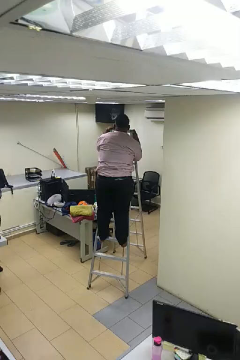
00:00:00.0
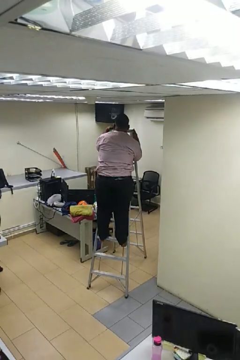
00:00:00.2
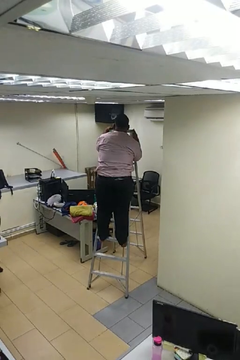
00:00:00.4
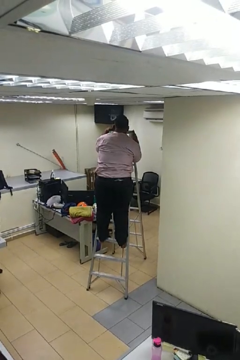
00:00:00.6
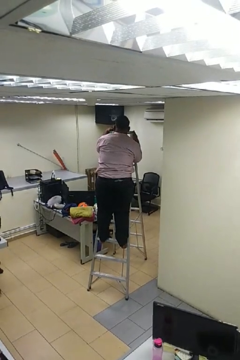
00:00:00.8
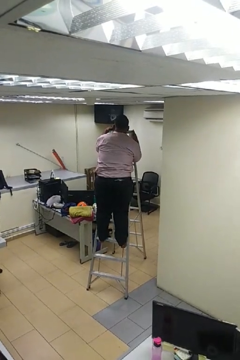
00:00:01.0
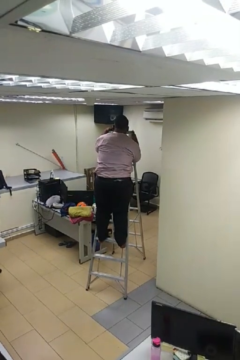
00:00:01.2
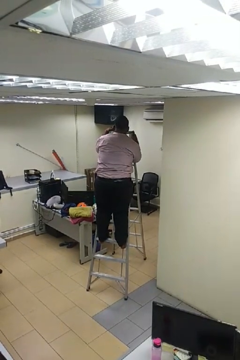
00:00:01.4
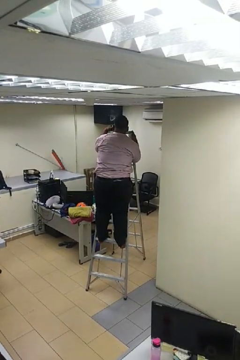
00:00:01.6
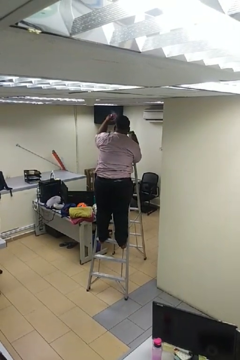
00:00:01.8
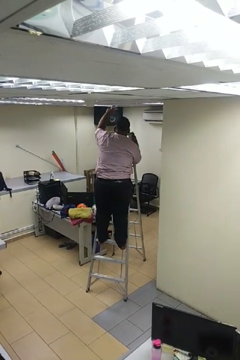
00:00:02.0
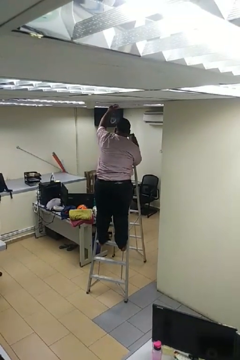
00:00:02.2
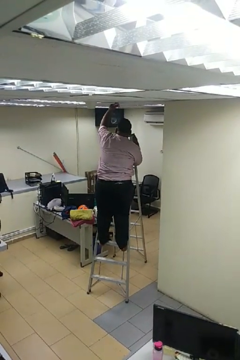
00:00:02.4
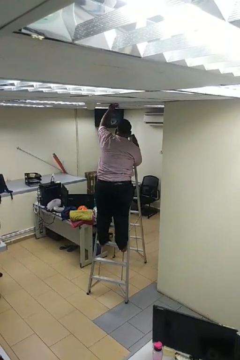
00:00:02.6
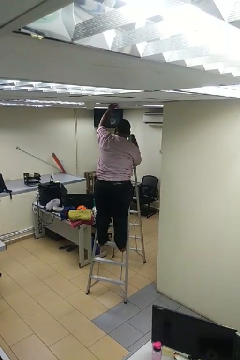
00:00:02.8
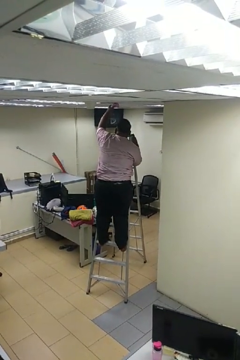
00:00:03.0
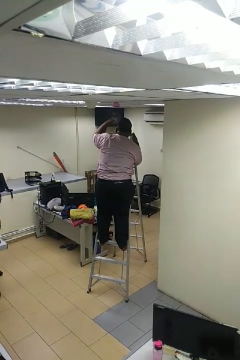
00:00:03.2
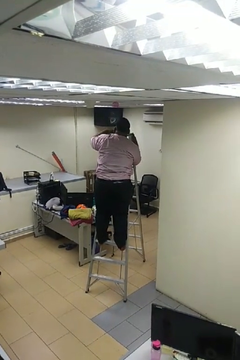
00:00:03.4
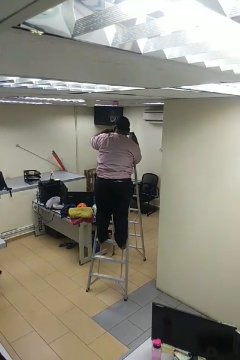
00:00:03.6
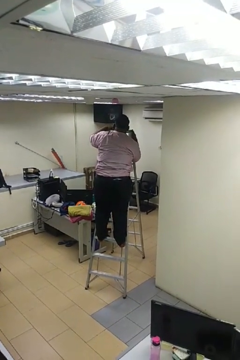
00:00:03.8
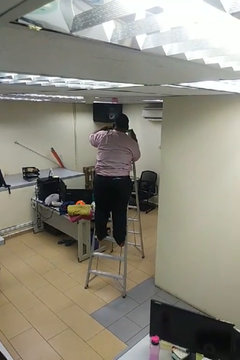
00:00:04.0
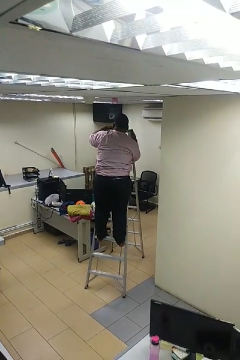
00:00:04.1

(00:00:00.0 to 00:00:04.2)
person puts up smoke detector

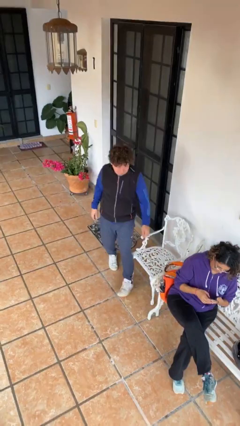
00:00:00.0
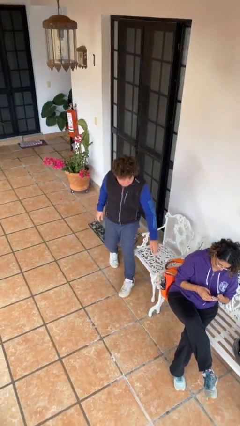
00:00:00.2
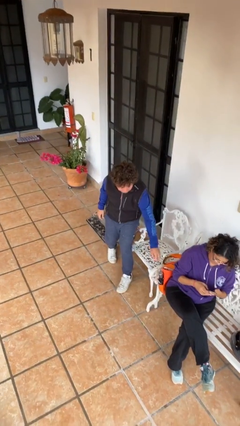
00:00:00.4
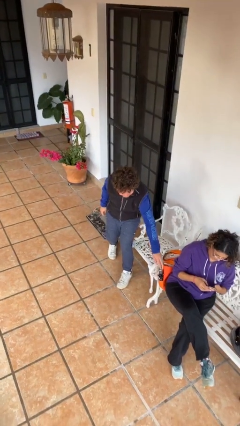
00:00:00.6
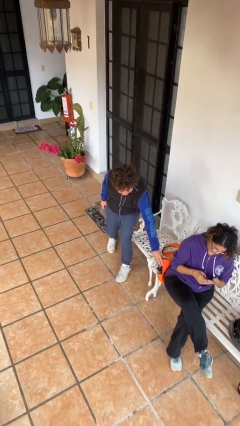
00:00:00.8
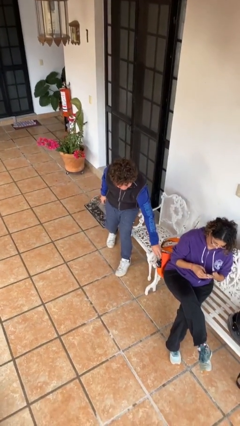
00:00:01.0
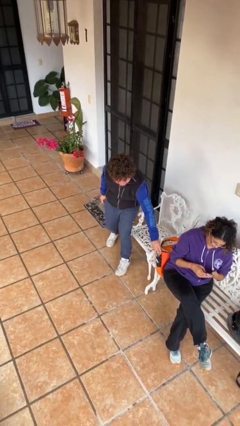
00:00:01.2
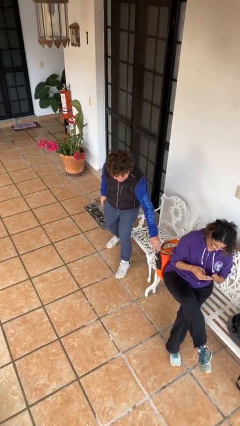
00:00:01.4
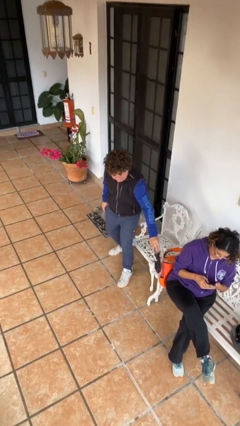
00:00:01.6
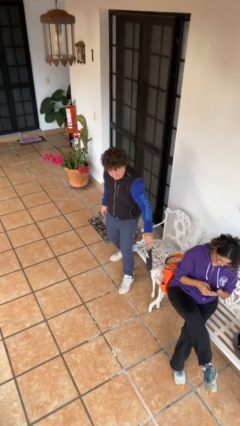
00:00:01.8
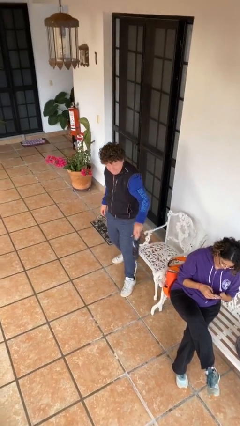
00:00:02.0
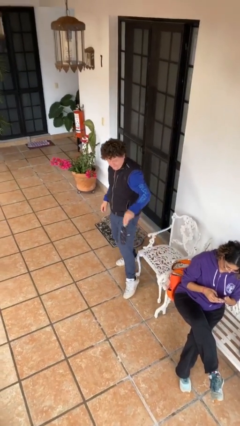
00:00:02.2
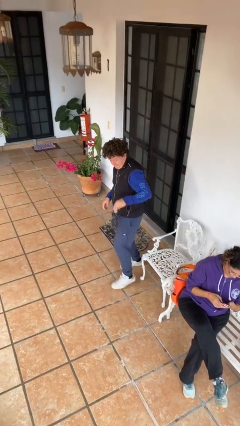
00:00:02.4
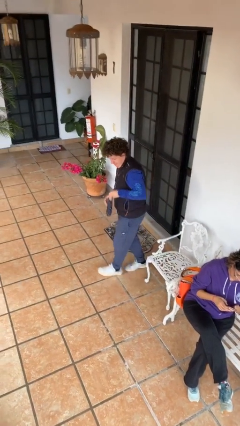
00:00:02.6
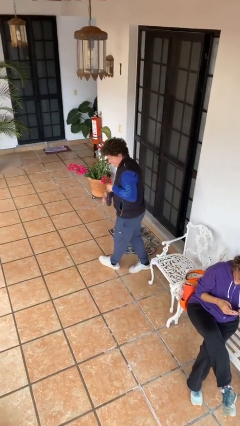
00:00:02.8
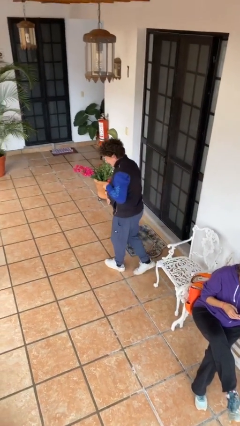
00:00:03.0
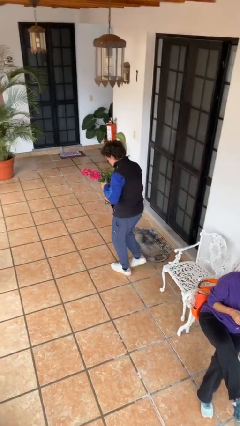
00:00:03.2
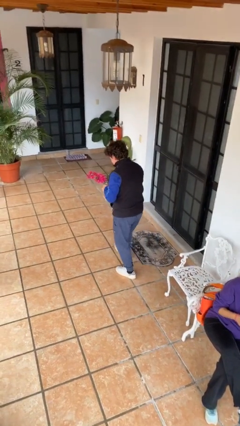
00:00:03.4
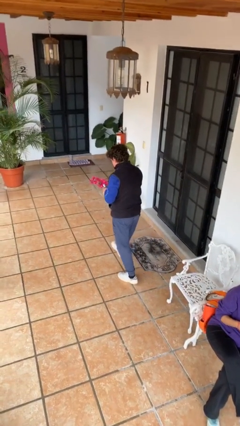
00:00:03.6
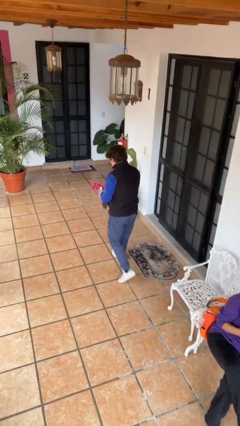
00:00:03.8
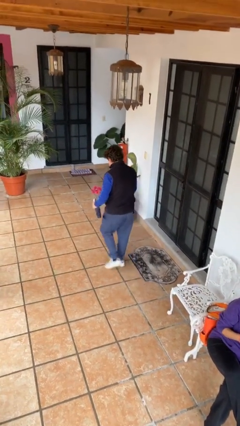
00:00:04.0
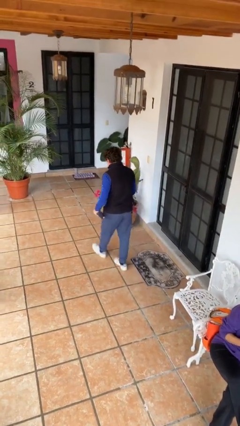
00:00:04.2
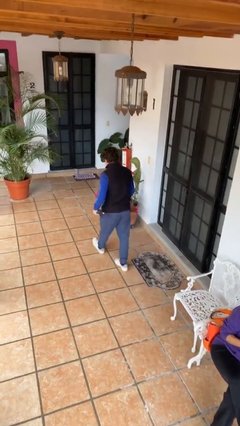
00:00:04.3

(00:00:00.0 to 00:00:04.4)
person steals object from person

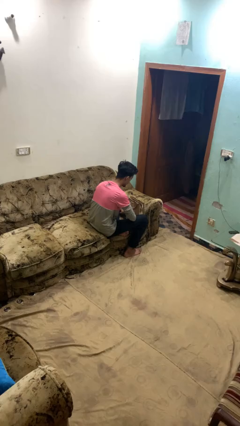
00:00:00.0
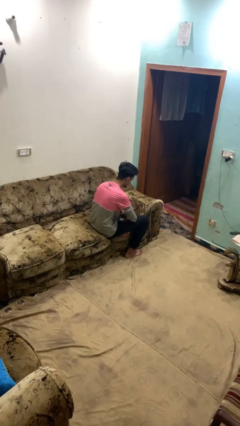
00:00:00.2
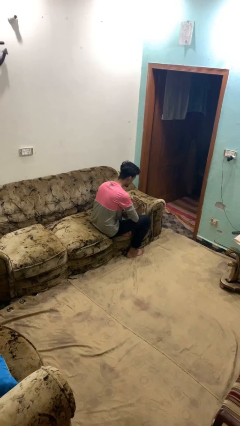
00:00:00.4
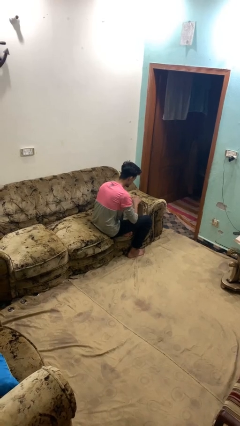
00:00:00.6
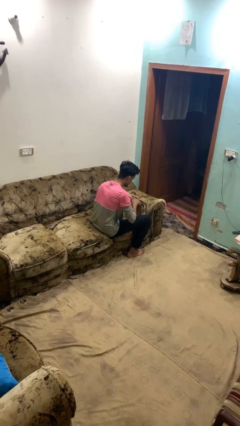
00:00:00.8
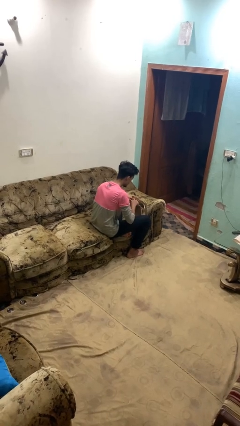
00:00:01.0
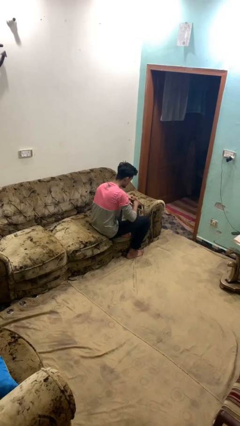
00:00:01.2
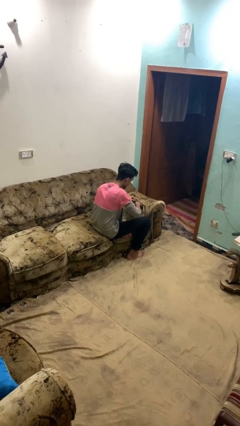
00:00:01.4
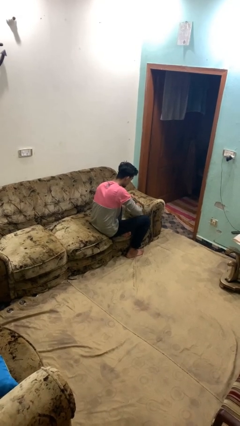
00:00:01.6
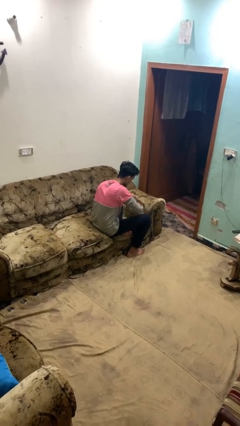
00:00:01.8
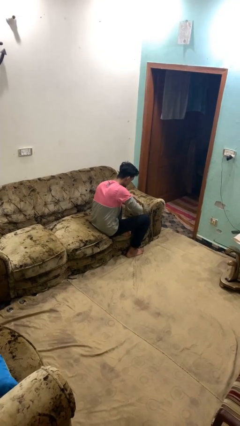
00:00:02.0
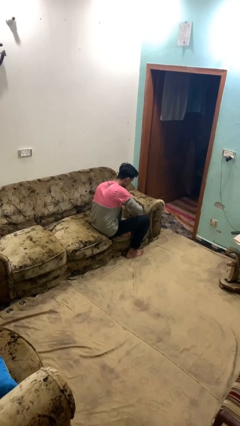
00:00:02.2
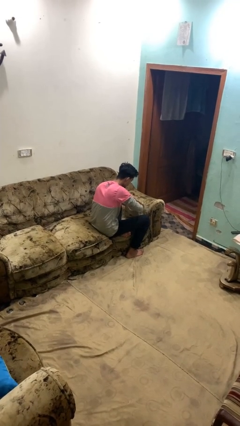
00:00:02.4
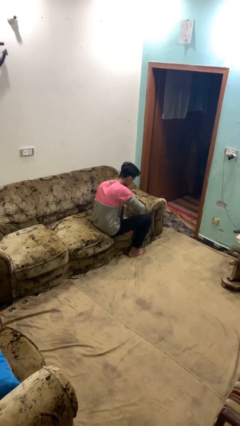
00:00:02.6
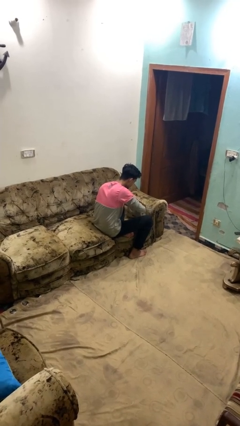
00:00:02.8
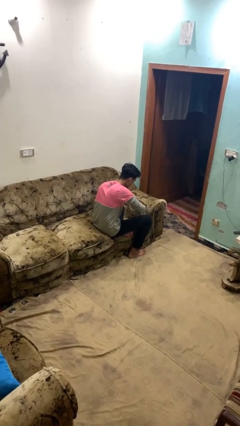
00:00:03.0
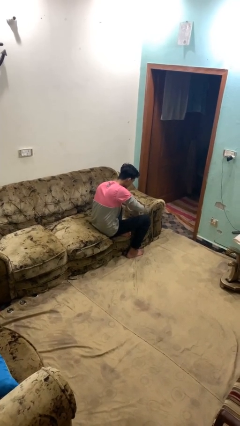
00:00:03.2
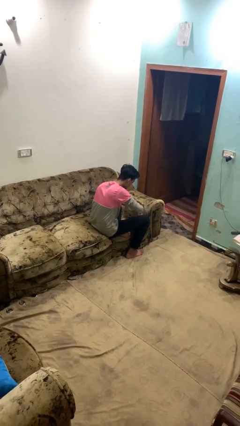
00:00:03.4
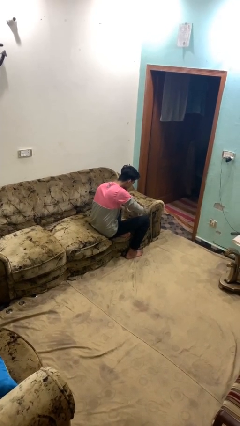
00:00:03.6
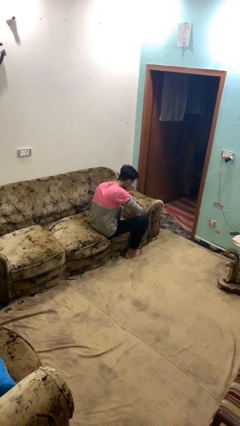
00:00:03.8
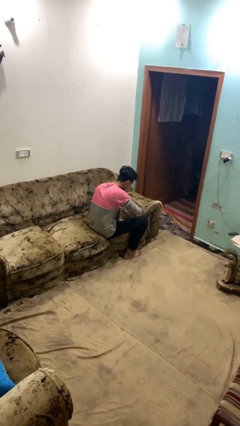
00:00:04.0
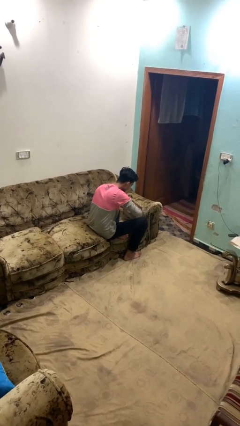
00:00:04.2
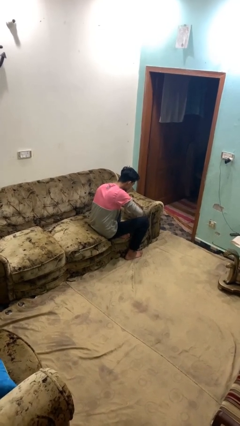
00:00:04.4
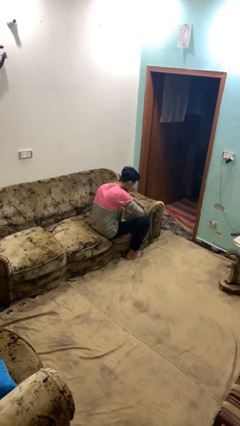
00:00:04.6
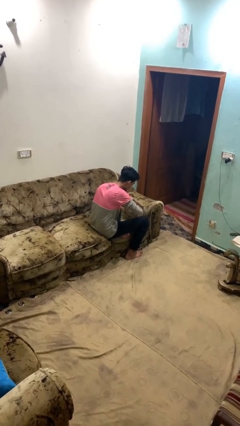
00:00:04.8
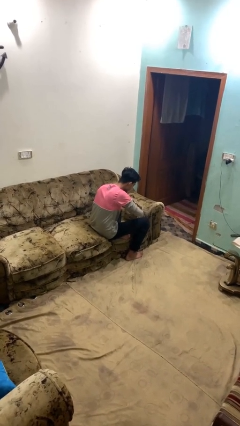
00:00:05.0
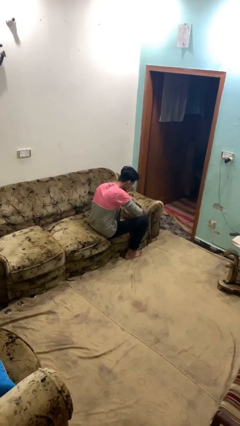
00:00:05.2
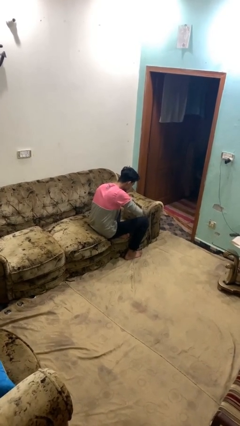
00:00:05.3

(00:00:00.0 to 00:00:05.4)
person searches in purse

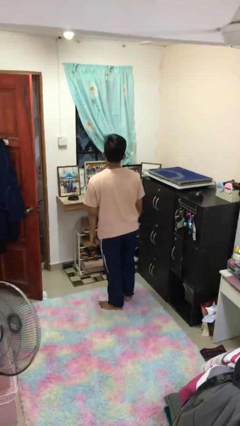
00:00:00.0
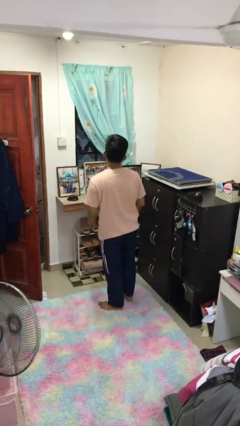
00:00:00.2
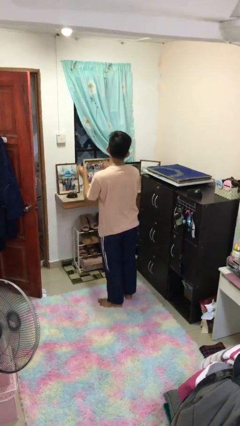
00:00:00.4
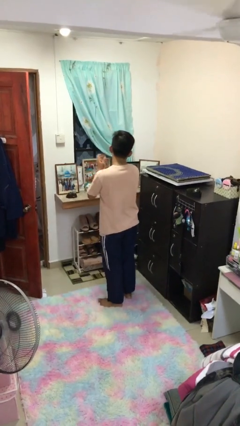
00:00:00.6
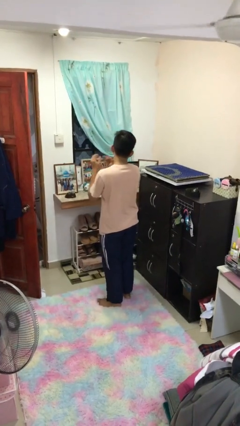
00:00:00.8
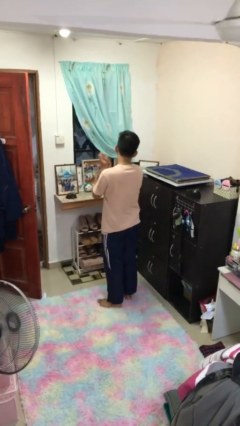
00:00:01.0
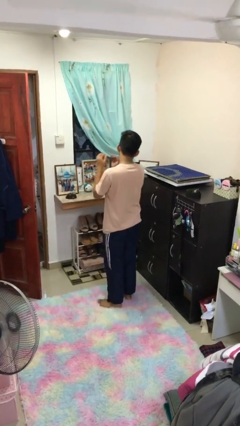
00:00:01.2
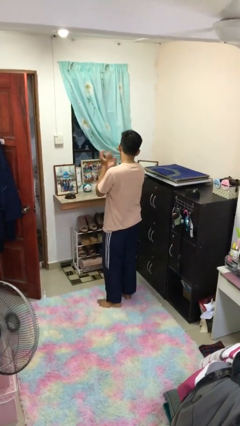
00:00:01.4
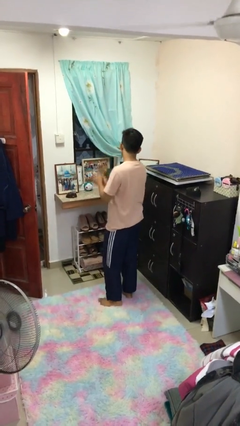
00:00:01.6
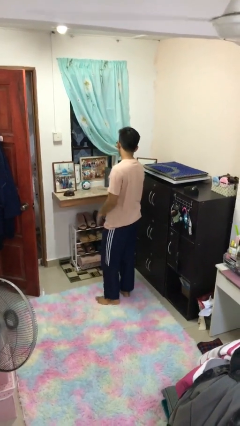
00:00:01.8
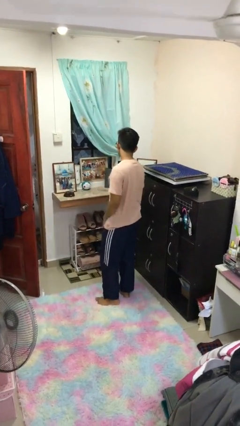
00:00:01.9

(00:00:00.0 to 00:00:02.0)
person claps hands

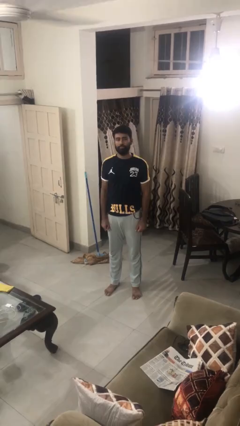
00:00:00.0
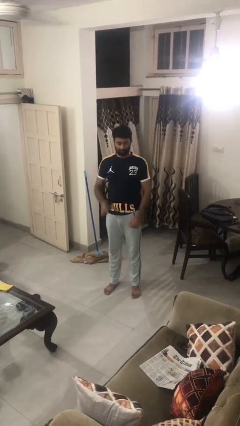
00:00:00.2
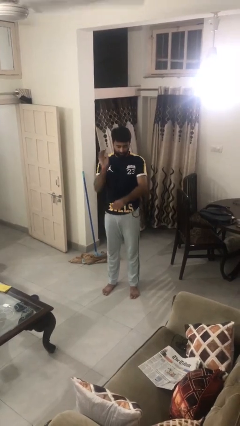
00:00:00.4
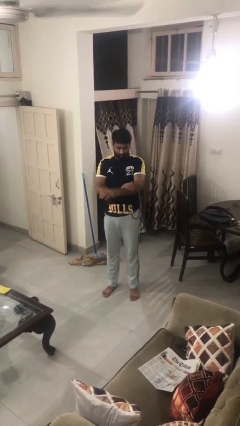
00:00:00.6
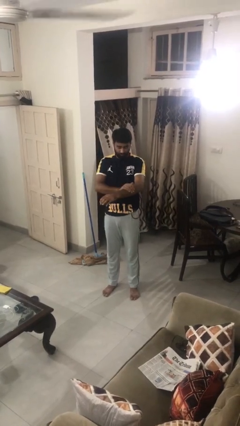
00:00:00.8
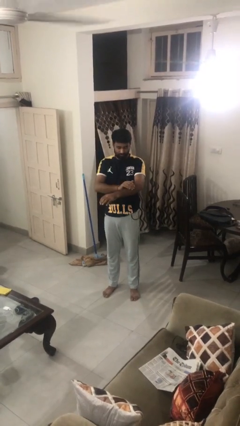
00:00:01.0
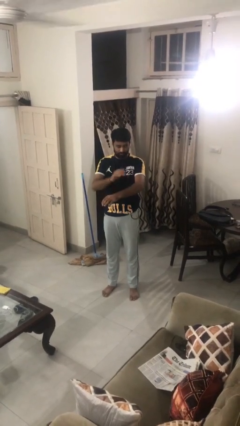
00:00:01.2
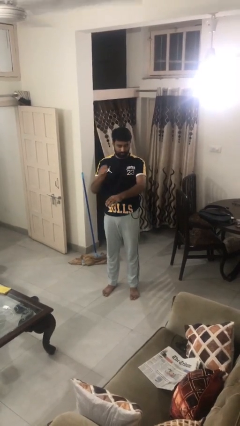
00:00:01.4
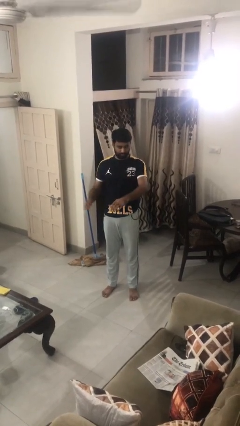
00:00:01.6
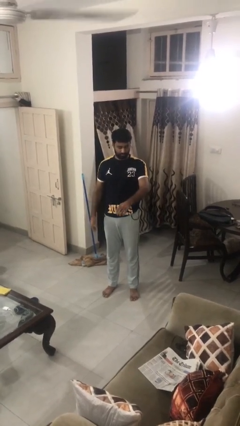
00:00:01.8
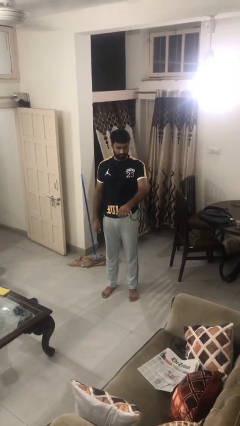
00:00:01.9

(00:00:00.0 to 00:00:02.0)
person swats bug
